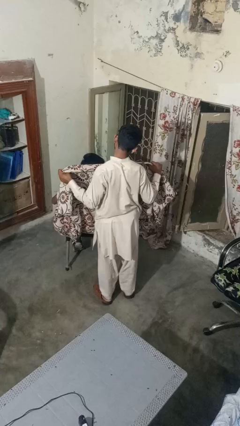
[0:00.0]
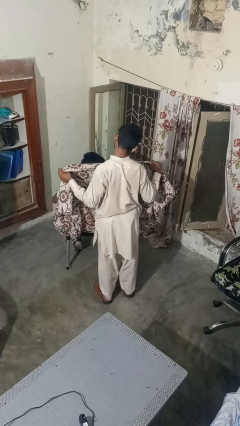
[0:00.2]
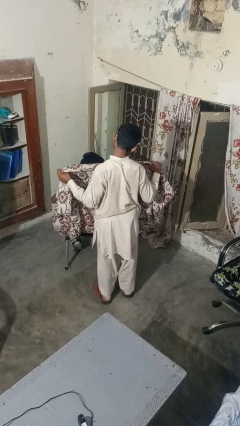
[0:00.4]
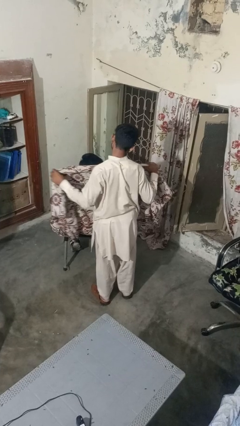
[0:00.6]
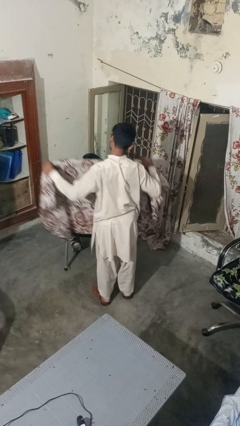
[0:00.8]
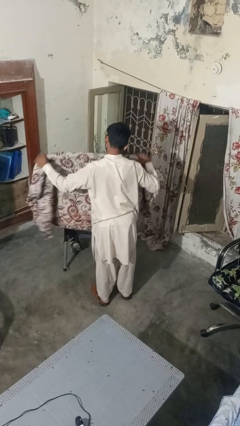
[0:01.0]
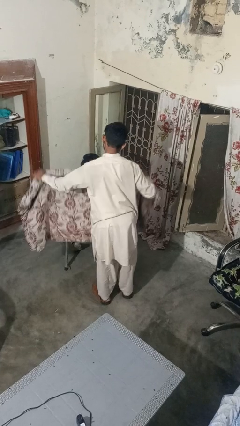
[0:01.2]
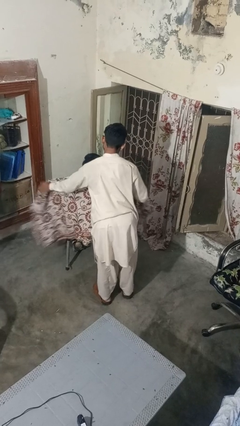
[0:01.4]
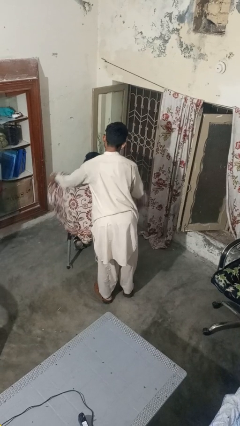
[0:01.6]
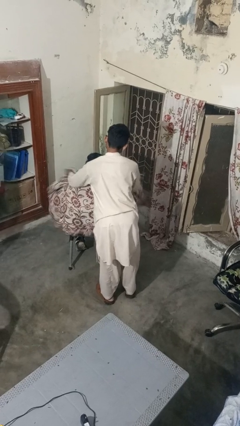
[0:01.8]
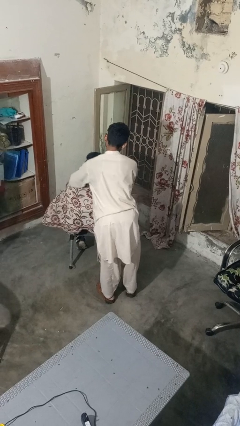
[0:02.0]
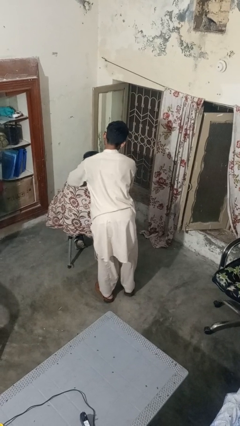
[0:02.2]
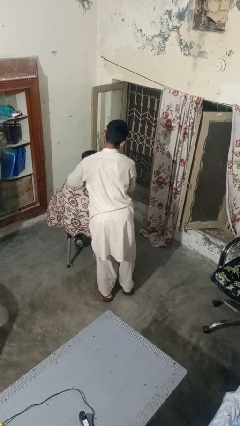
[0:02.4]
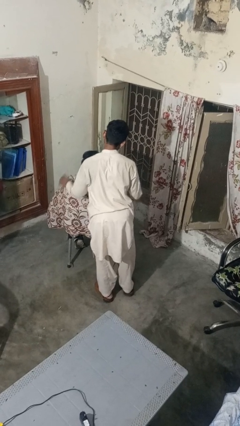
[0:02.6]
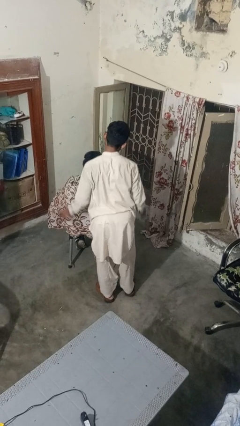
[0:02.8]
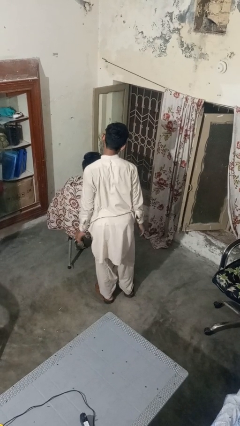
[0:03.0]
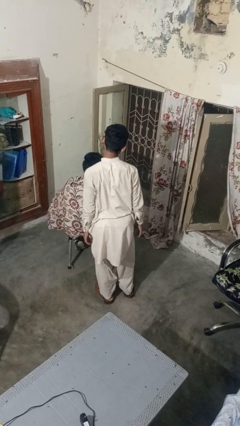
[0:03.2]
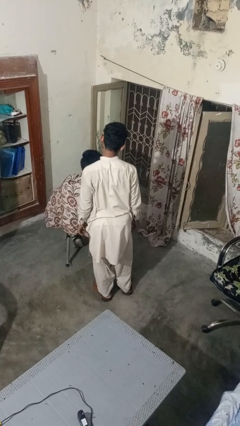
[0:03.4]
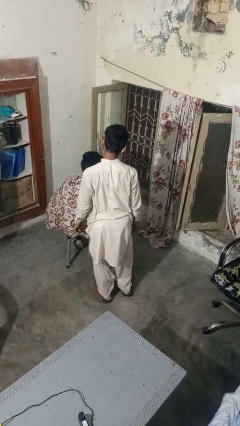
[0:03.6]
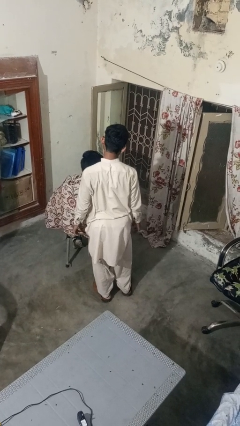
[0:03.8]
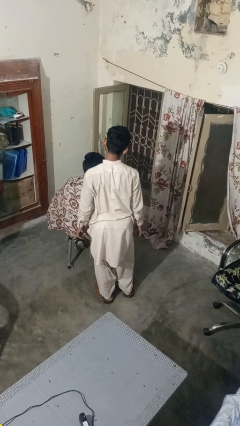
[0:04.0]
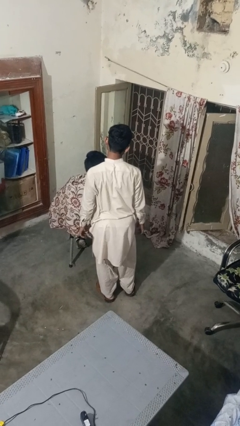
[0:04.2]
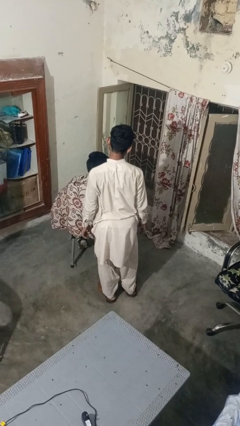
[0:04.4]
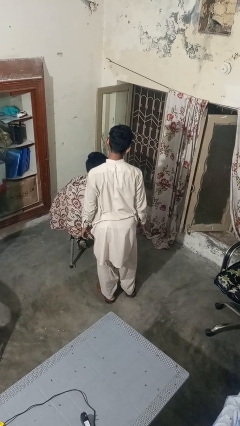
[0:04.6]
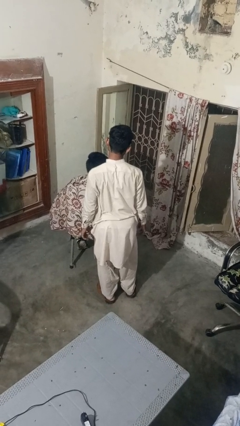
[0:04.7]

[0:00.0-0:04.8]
person covers friend with blanket

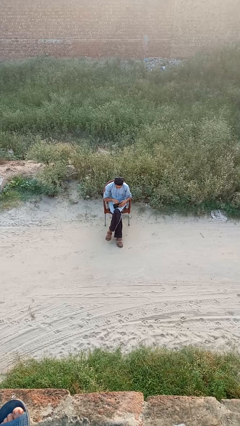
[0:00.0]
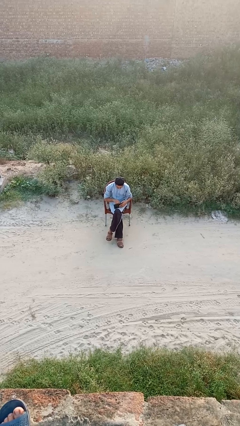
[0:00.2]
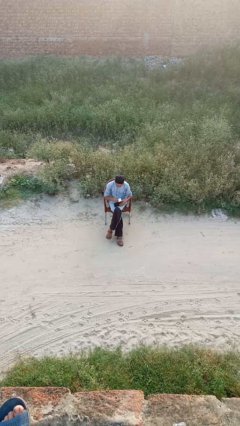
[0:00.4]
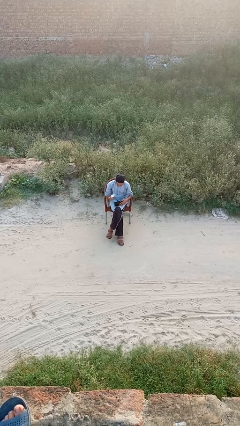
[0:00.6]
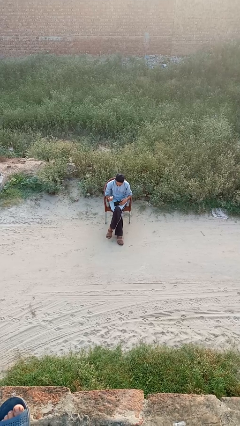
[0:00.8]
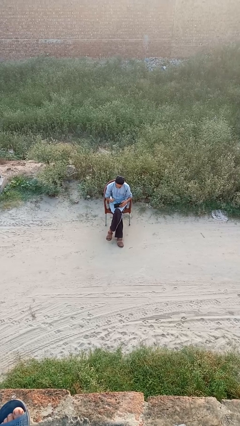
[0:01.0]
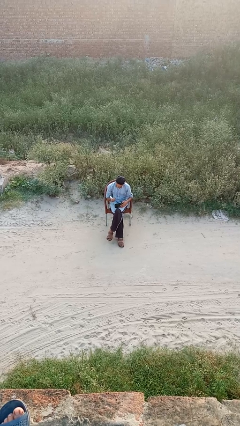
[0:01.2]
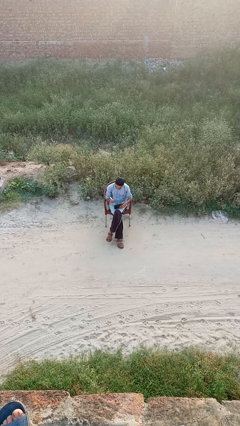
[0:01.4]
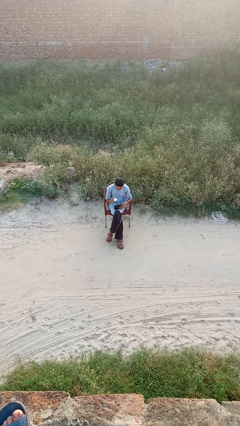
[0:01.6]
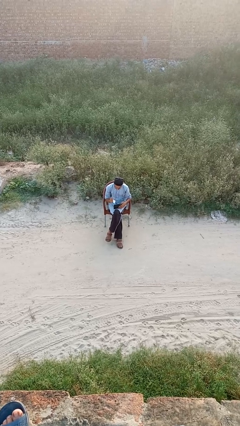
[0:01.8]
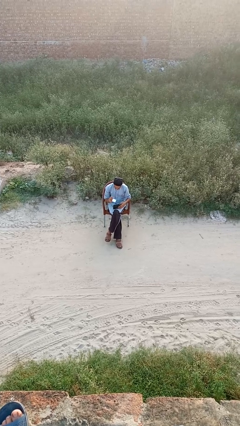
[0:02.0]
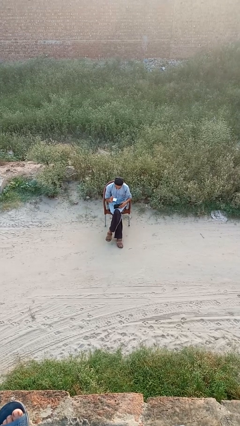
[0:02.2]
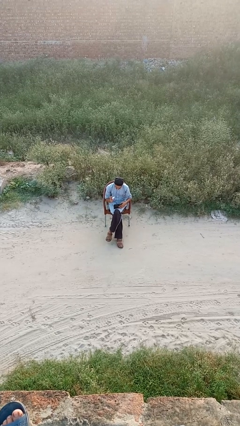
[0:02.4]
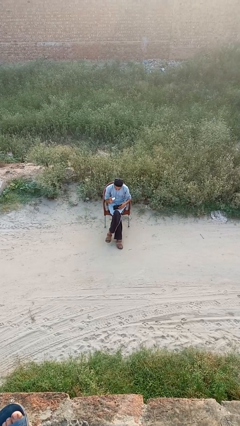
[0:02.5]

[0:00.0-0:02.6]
person takes object from purse

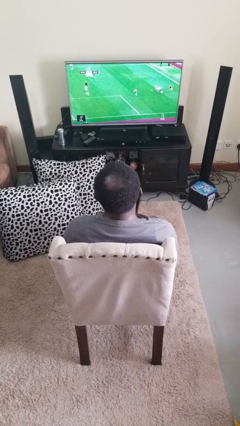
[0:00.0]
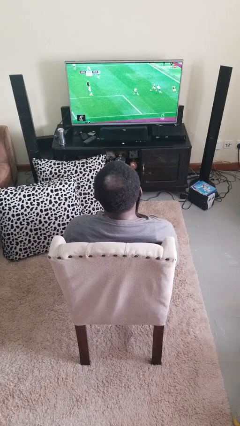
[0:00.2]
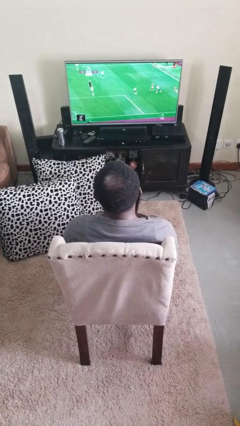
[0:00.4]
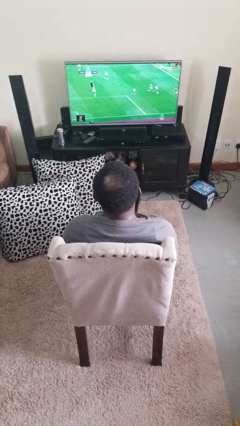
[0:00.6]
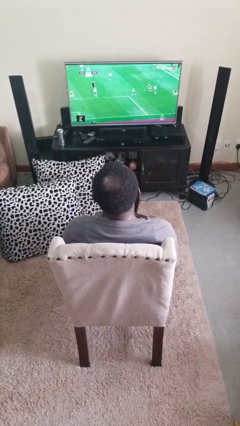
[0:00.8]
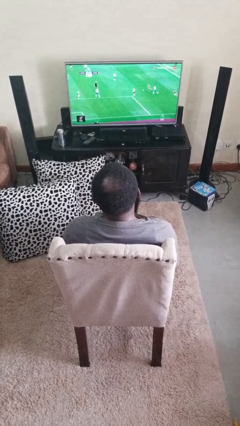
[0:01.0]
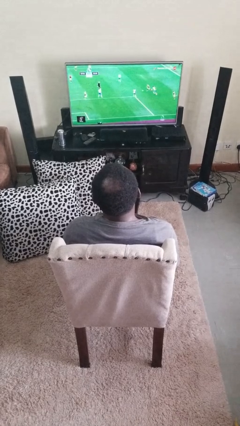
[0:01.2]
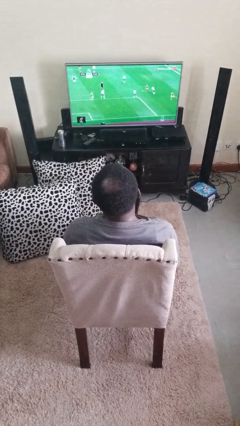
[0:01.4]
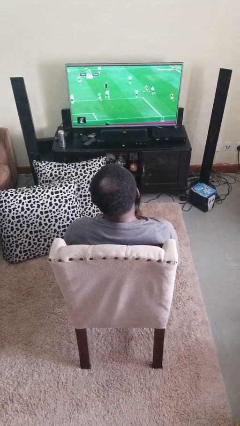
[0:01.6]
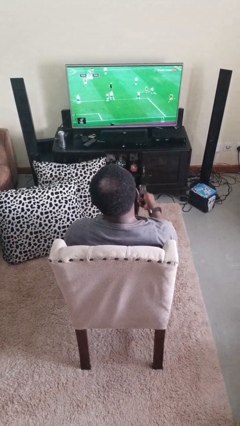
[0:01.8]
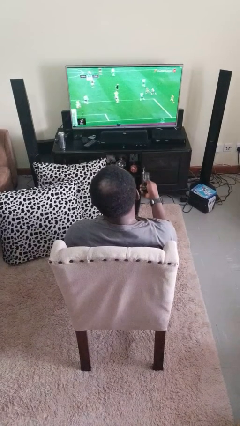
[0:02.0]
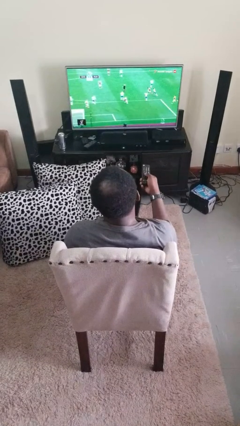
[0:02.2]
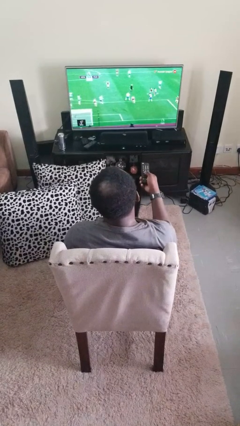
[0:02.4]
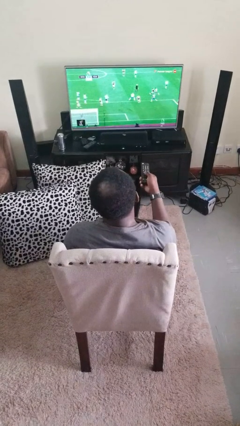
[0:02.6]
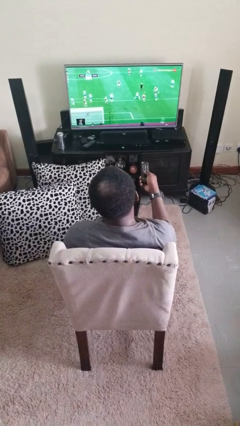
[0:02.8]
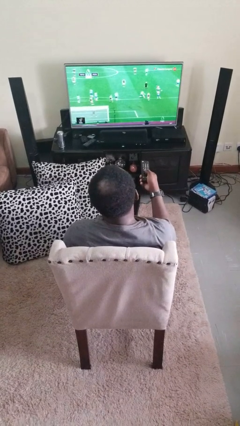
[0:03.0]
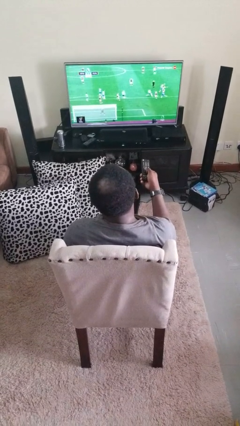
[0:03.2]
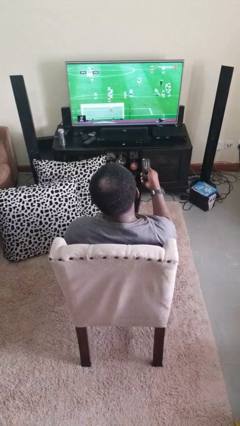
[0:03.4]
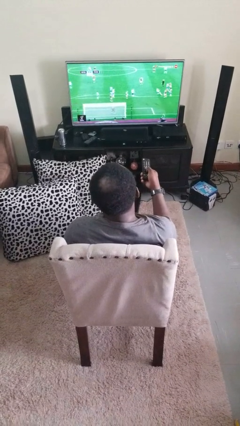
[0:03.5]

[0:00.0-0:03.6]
person uses television remote

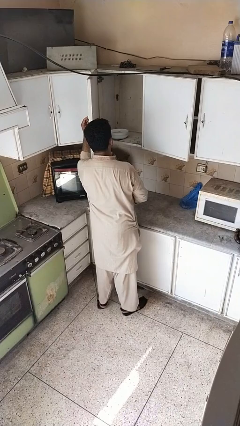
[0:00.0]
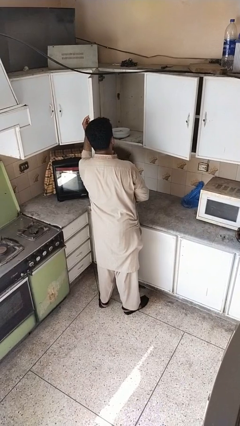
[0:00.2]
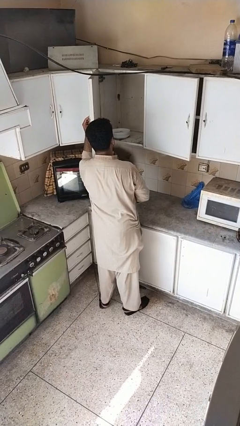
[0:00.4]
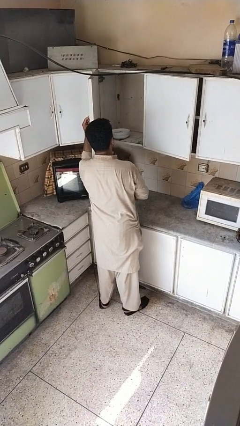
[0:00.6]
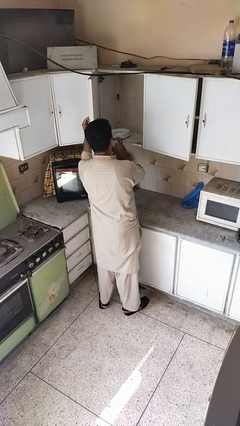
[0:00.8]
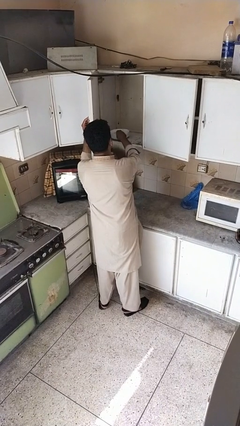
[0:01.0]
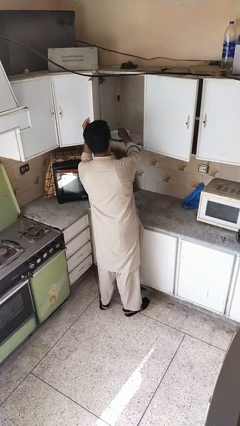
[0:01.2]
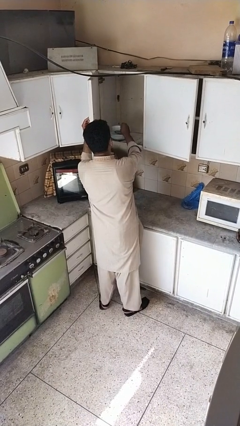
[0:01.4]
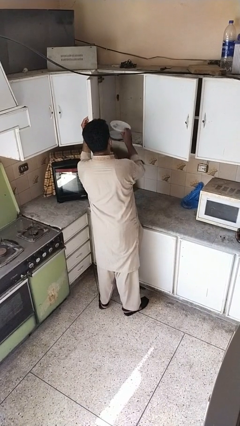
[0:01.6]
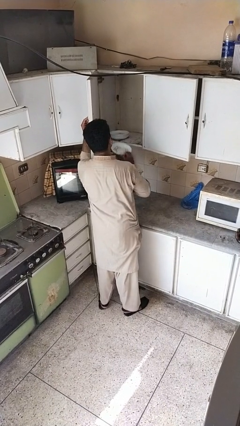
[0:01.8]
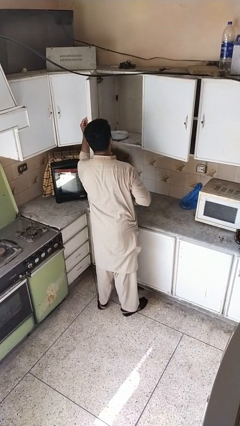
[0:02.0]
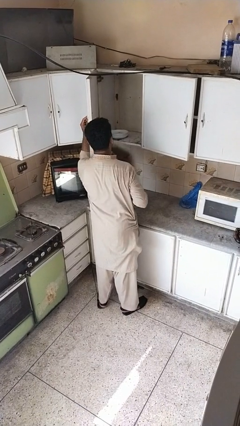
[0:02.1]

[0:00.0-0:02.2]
person takes object from cabinet

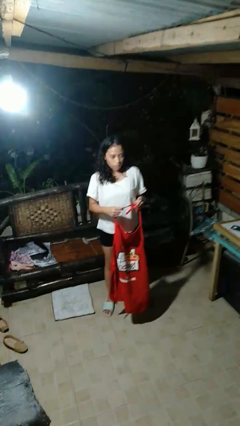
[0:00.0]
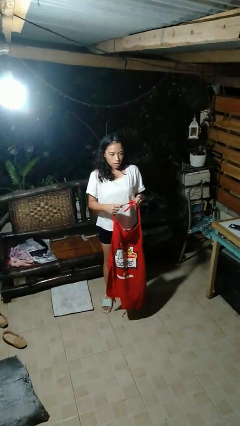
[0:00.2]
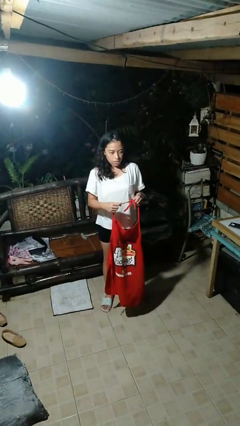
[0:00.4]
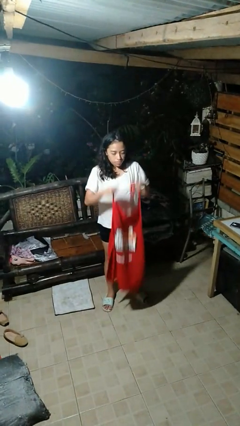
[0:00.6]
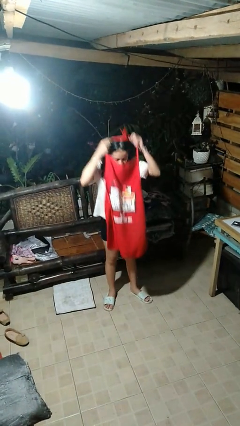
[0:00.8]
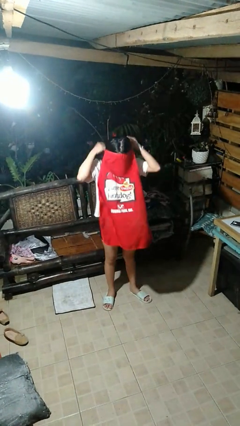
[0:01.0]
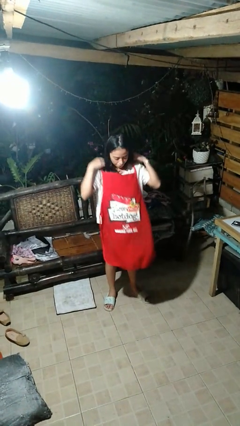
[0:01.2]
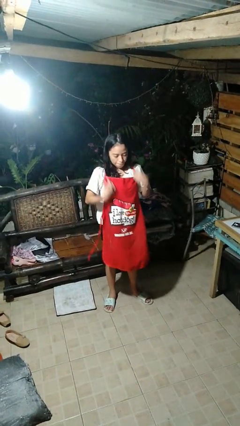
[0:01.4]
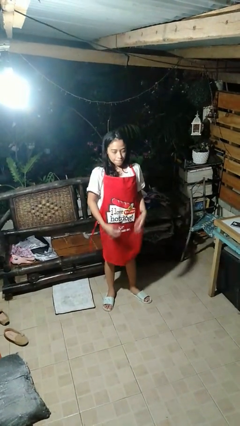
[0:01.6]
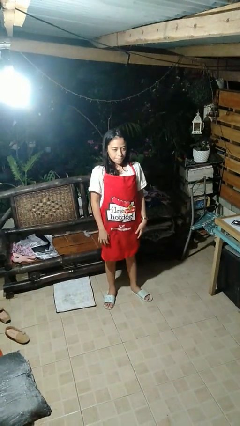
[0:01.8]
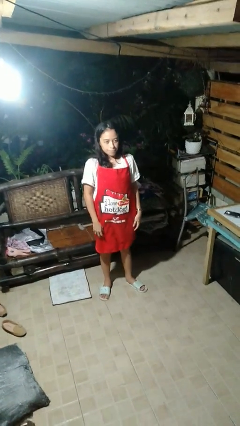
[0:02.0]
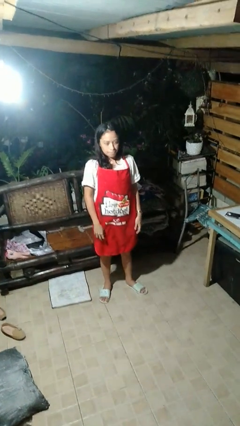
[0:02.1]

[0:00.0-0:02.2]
person puts on apron

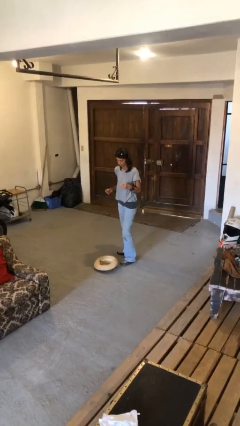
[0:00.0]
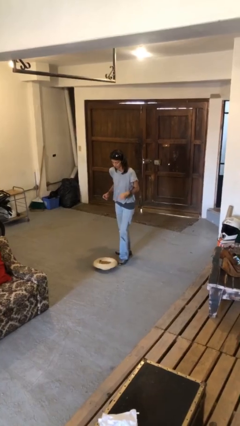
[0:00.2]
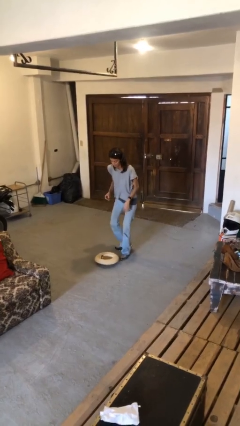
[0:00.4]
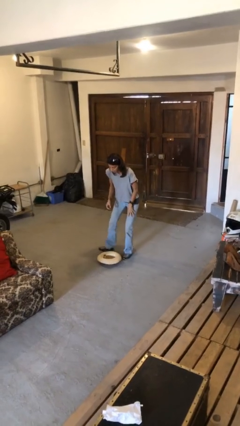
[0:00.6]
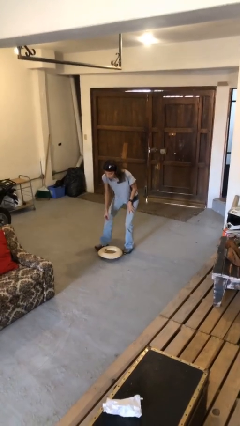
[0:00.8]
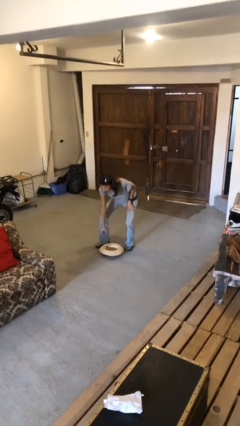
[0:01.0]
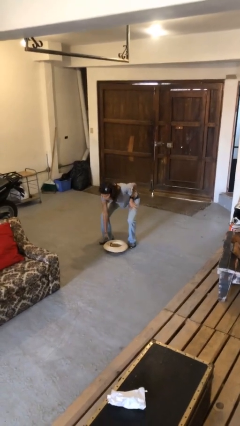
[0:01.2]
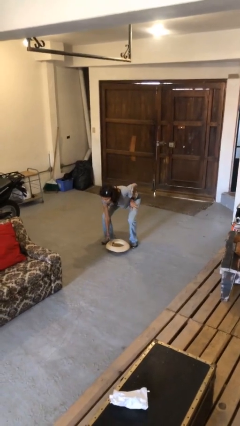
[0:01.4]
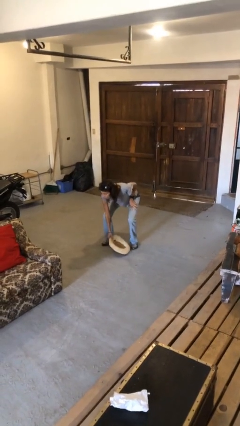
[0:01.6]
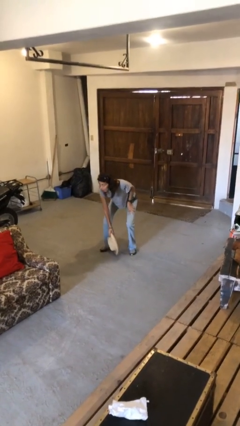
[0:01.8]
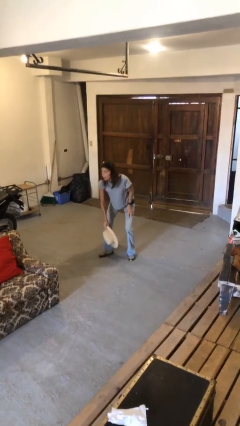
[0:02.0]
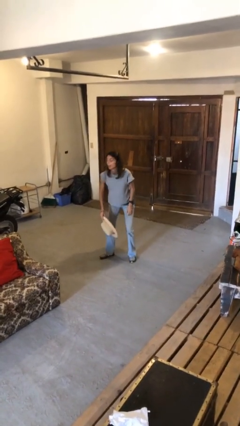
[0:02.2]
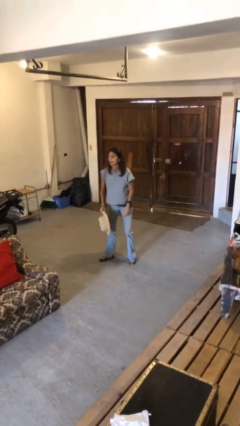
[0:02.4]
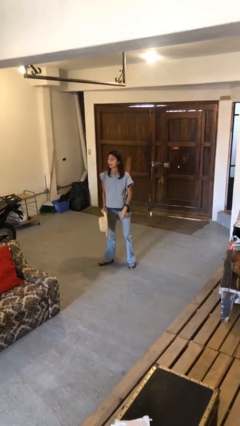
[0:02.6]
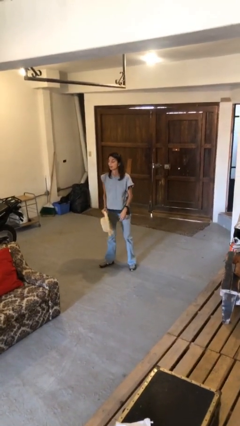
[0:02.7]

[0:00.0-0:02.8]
person picks up object from floor
